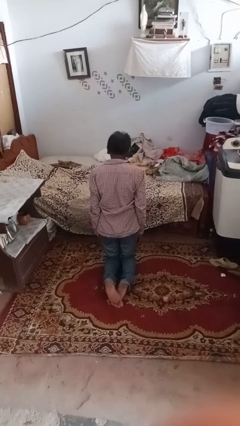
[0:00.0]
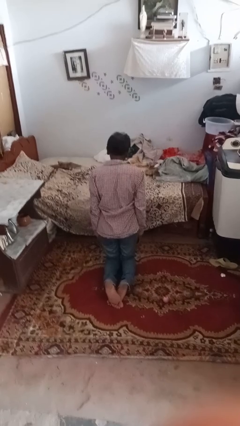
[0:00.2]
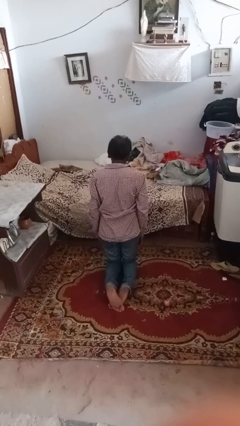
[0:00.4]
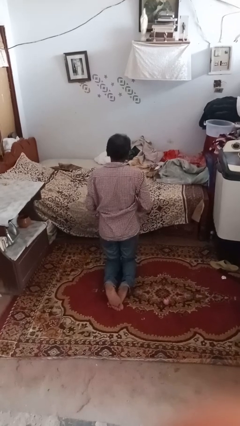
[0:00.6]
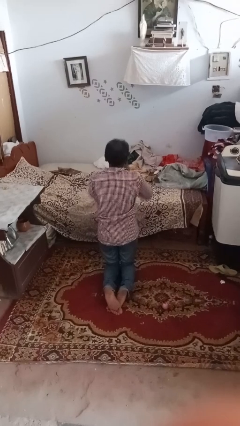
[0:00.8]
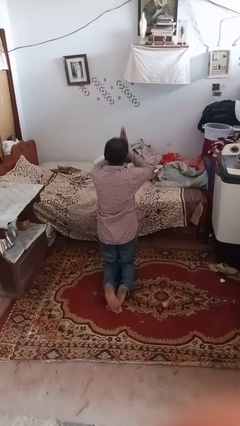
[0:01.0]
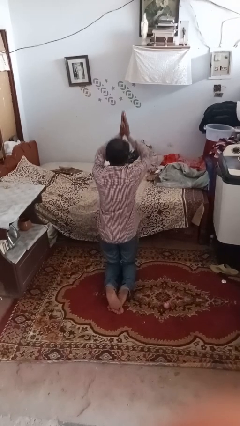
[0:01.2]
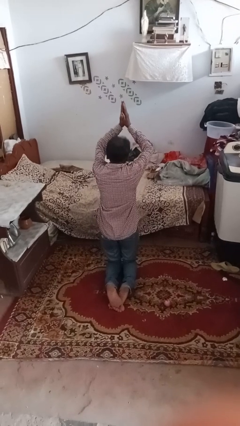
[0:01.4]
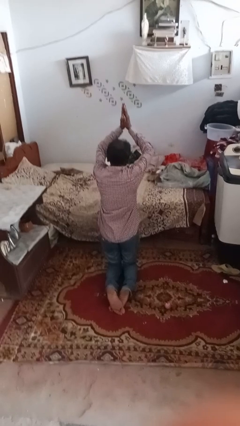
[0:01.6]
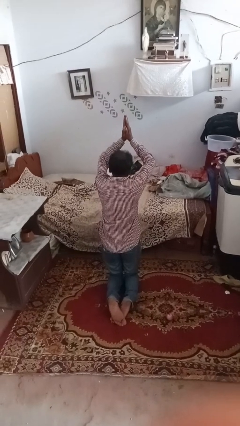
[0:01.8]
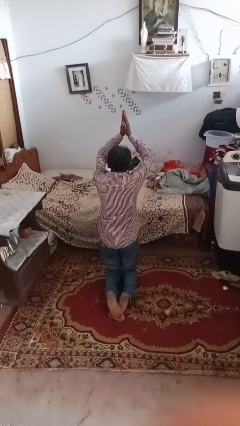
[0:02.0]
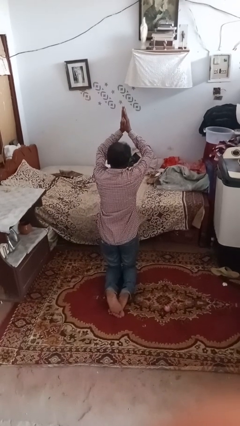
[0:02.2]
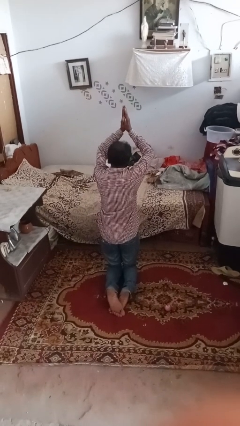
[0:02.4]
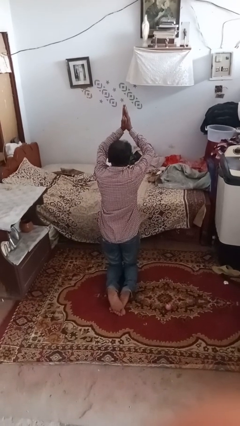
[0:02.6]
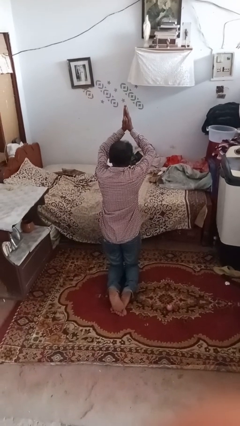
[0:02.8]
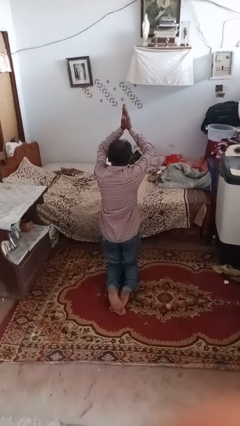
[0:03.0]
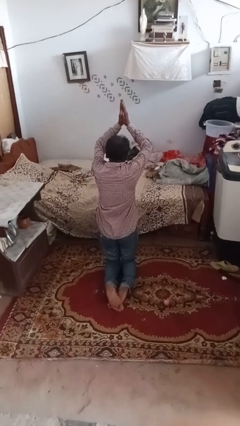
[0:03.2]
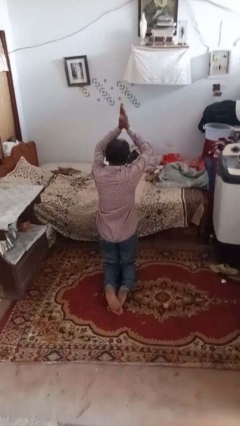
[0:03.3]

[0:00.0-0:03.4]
person prays

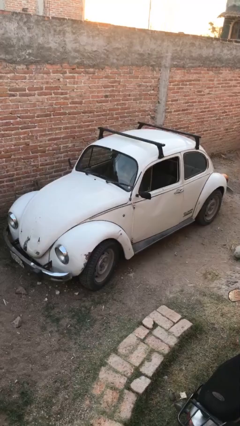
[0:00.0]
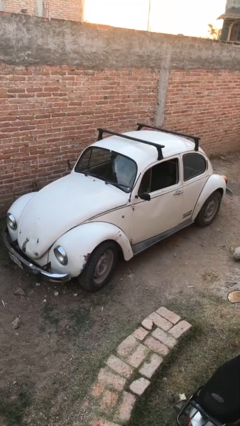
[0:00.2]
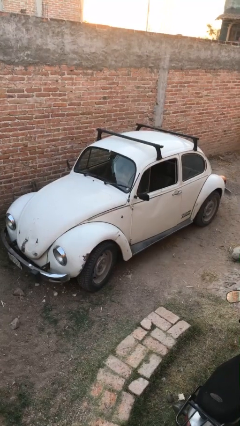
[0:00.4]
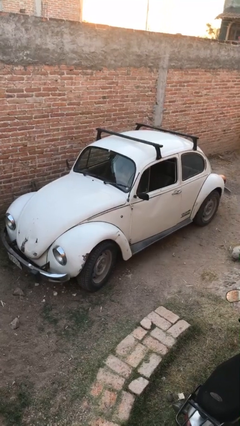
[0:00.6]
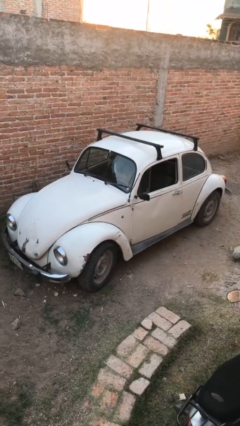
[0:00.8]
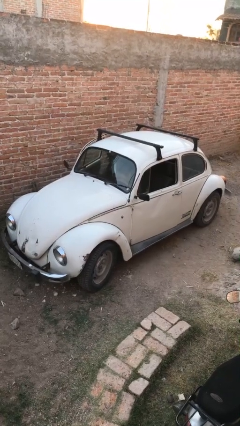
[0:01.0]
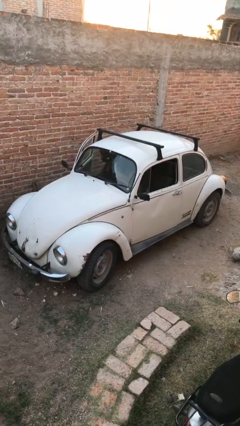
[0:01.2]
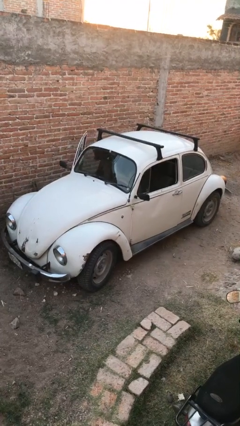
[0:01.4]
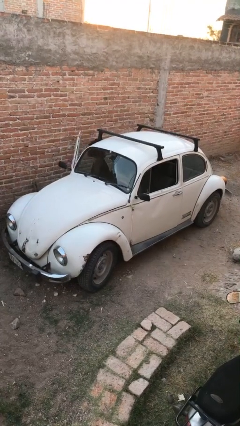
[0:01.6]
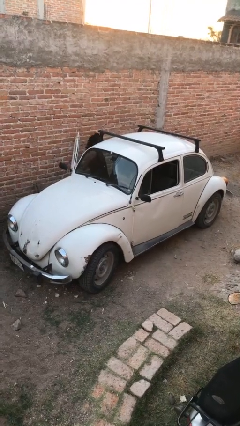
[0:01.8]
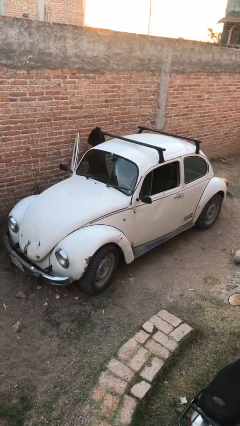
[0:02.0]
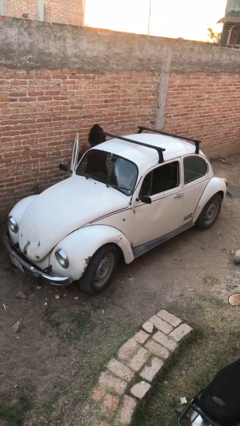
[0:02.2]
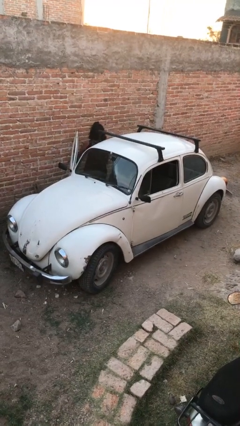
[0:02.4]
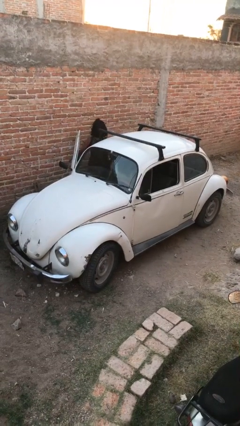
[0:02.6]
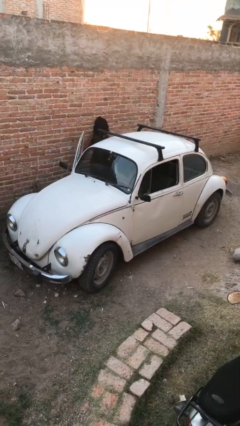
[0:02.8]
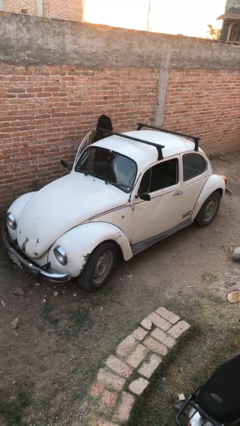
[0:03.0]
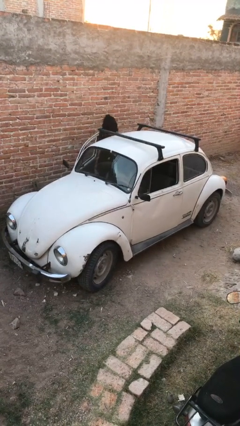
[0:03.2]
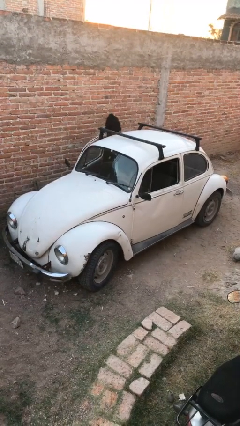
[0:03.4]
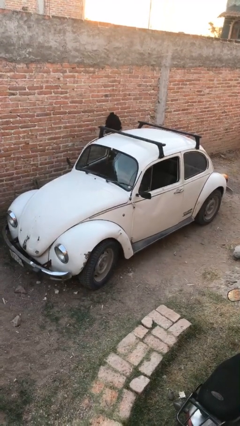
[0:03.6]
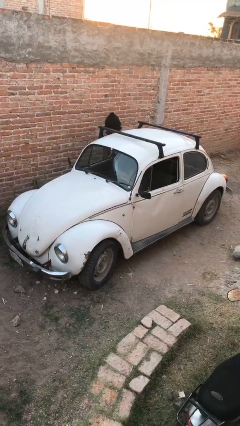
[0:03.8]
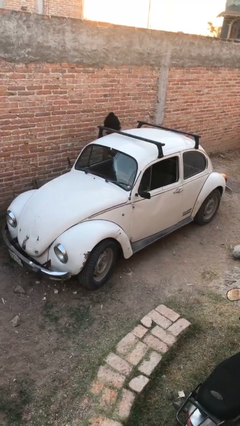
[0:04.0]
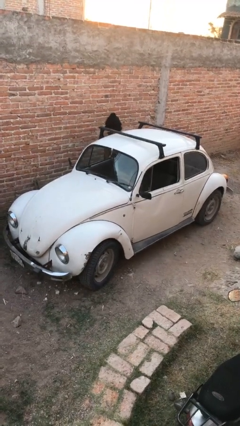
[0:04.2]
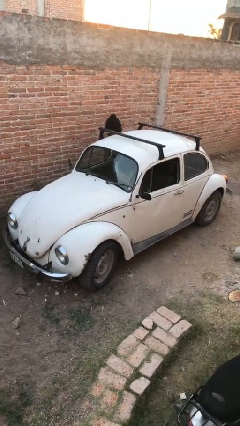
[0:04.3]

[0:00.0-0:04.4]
car drops off person

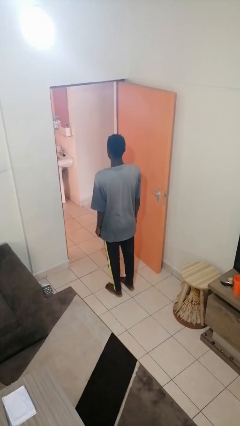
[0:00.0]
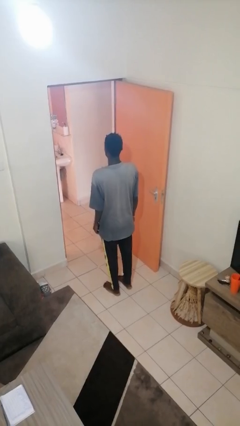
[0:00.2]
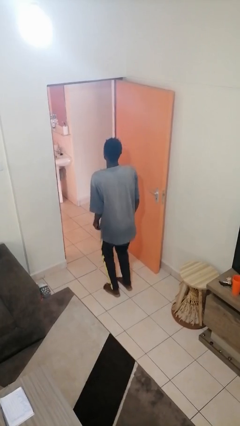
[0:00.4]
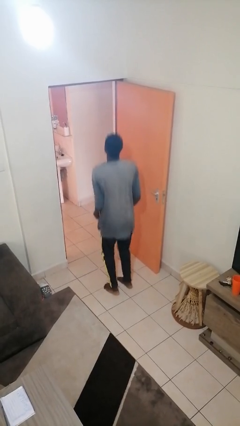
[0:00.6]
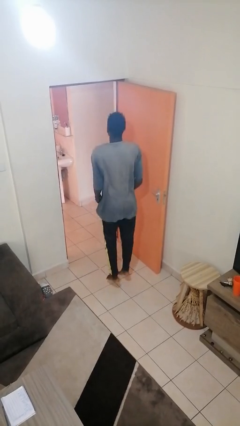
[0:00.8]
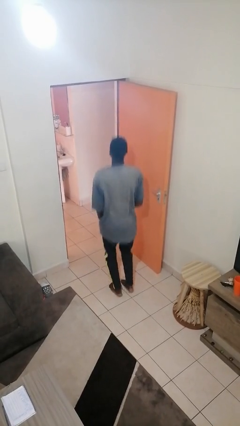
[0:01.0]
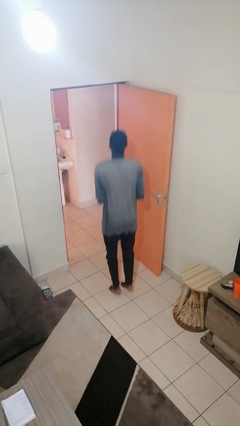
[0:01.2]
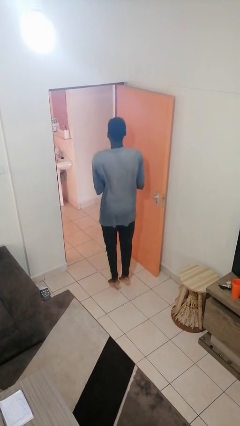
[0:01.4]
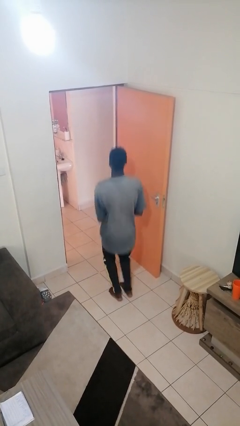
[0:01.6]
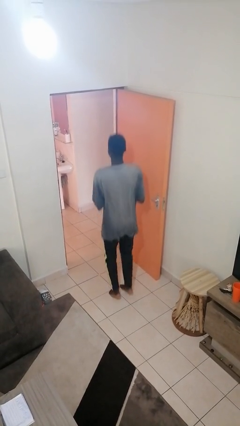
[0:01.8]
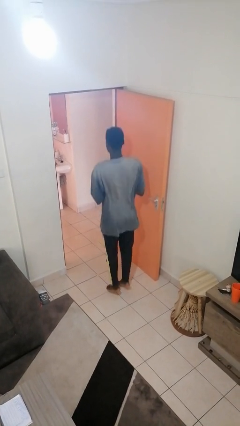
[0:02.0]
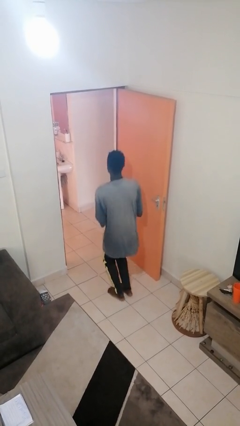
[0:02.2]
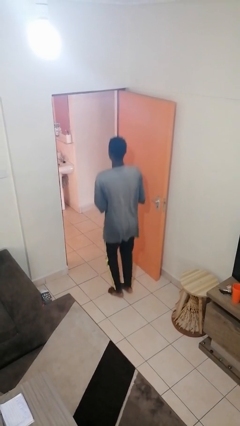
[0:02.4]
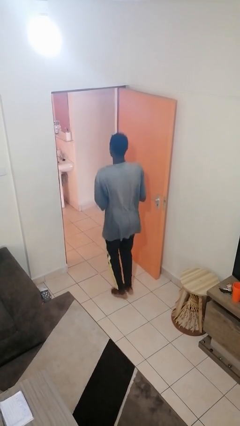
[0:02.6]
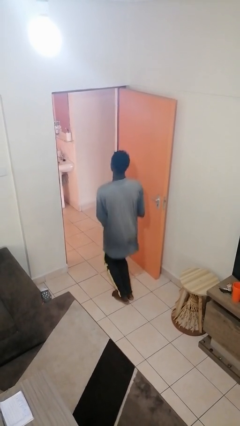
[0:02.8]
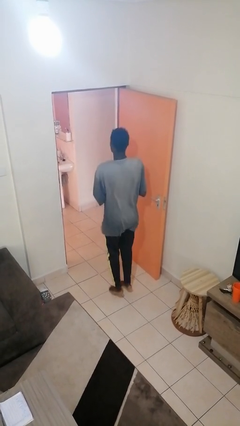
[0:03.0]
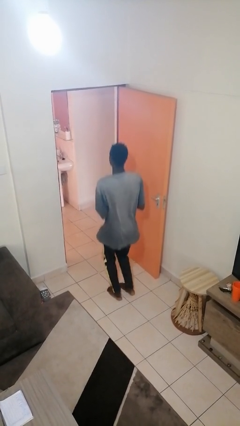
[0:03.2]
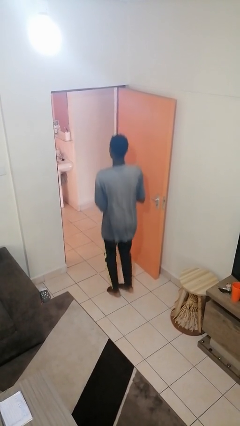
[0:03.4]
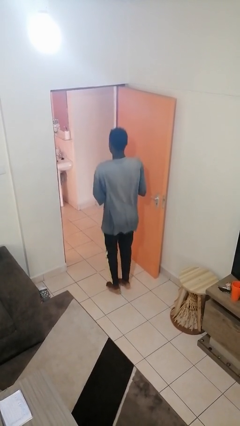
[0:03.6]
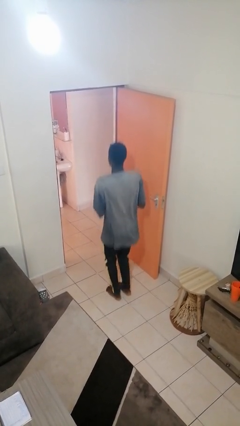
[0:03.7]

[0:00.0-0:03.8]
person jumps

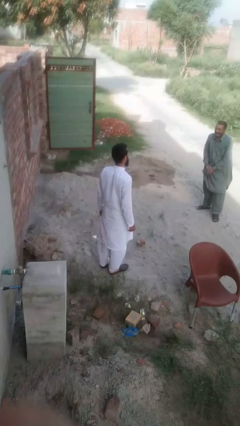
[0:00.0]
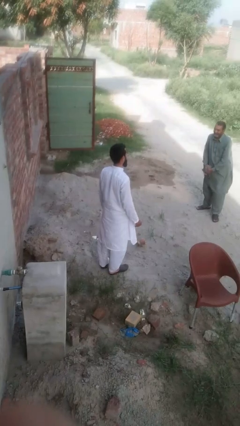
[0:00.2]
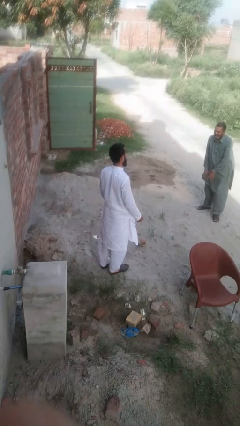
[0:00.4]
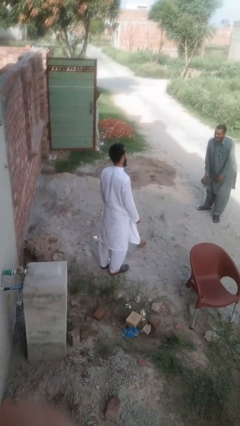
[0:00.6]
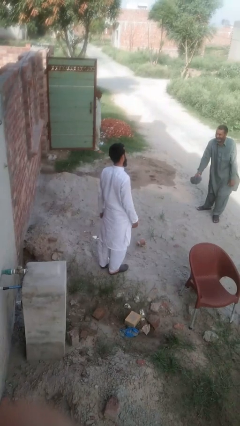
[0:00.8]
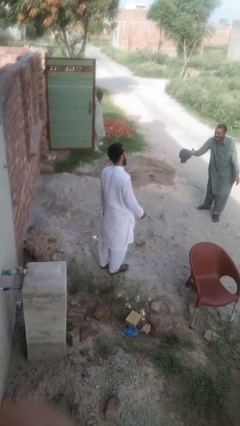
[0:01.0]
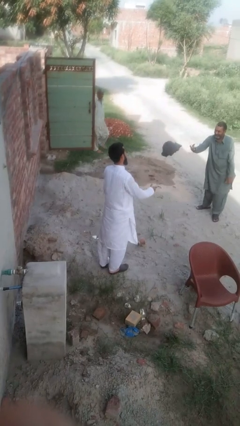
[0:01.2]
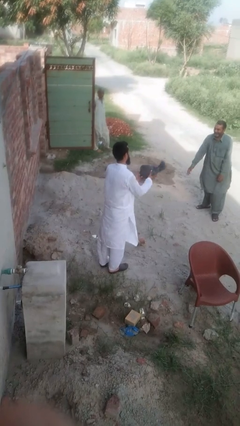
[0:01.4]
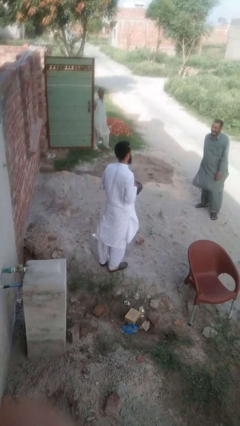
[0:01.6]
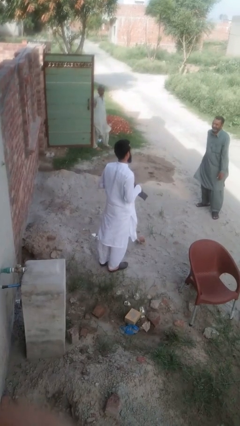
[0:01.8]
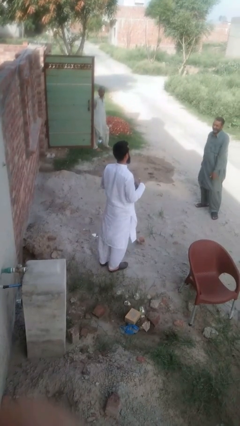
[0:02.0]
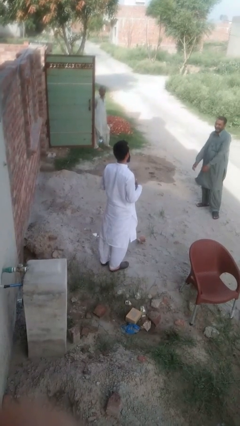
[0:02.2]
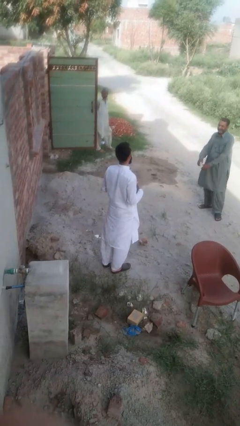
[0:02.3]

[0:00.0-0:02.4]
person catches object from person

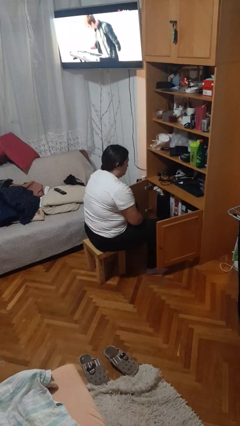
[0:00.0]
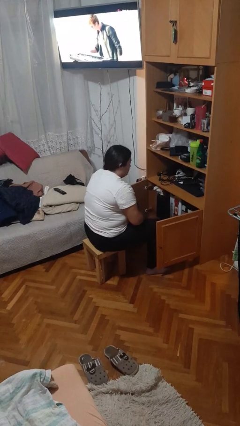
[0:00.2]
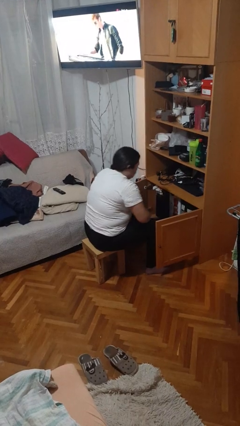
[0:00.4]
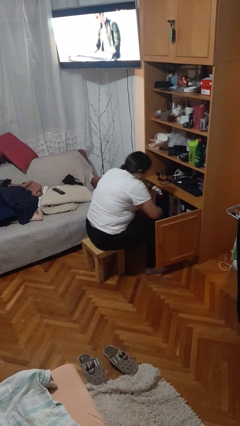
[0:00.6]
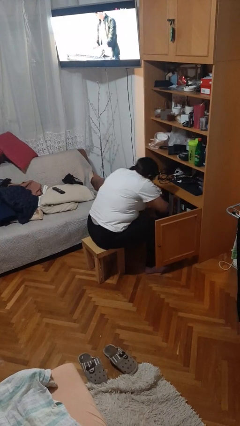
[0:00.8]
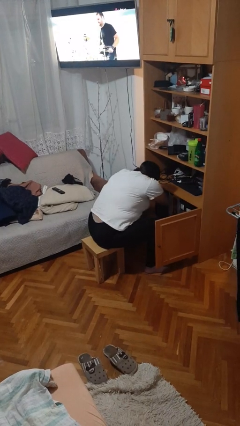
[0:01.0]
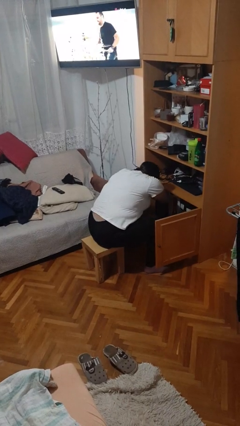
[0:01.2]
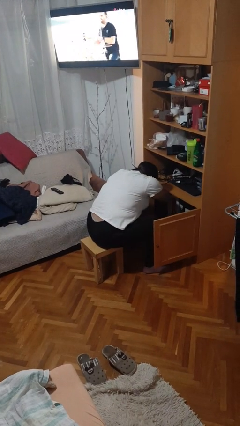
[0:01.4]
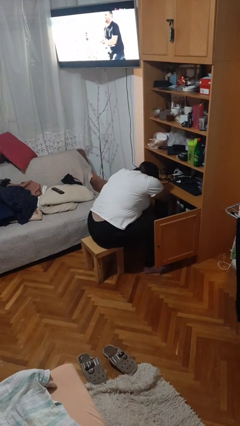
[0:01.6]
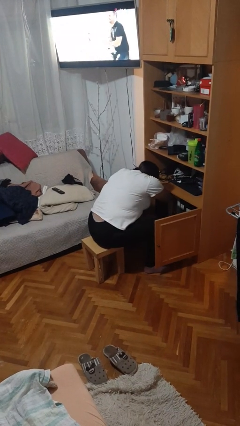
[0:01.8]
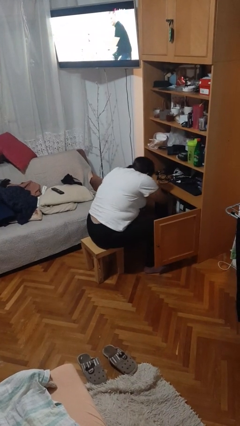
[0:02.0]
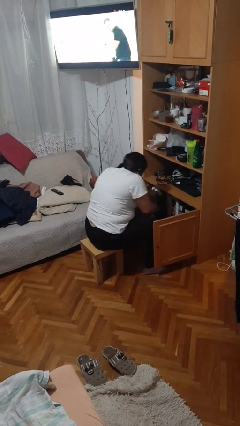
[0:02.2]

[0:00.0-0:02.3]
person searches in cabinet

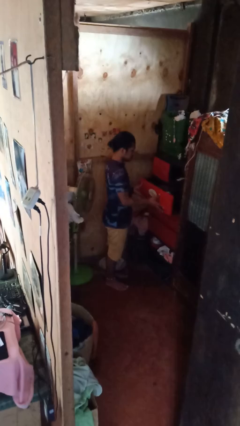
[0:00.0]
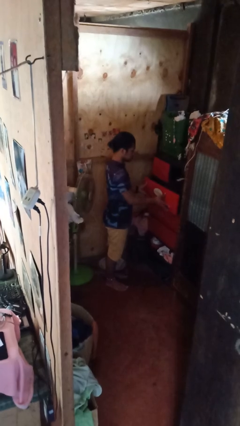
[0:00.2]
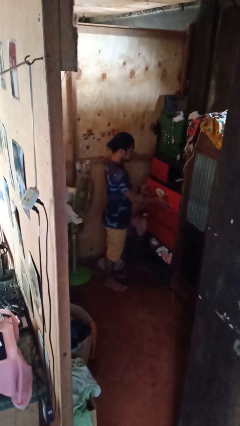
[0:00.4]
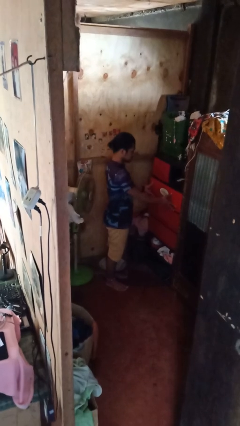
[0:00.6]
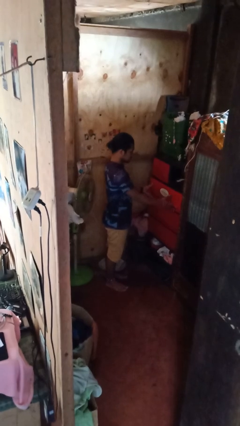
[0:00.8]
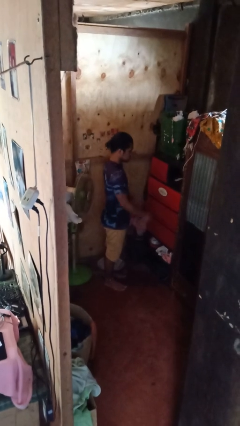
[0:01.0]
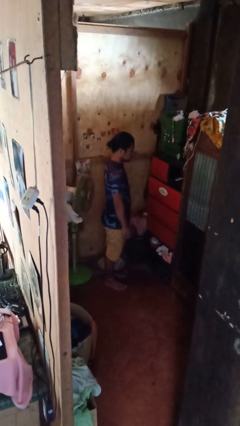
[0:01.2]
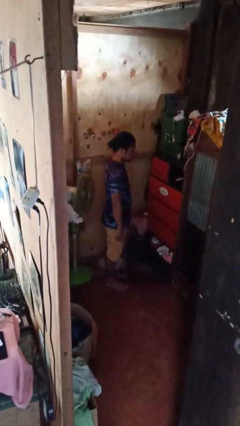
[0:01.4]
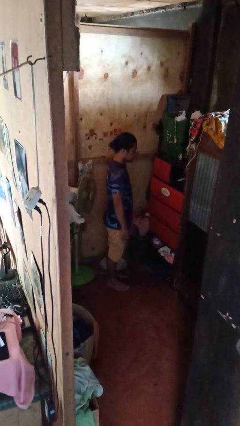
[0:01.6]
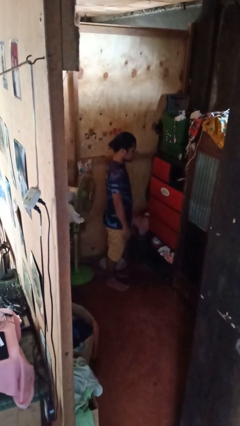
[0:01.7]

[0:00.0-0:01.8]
person closes dresser drawer
